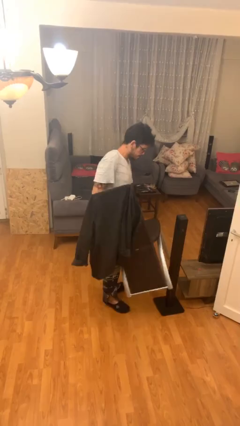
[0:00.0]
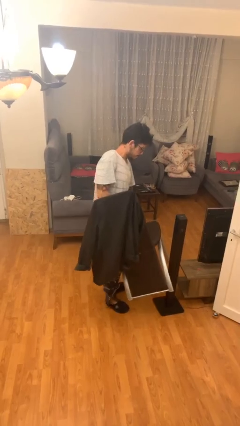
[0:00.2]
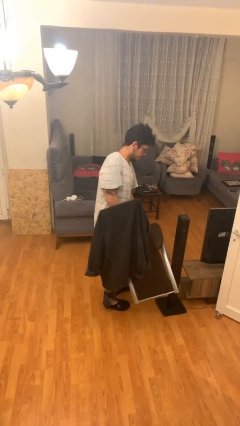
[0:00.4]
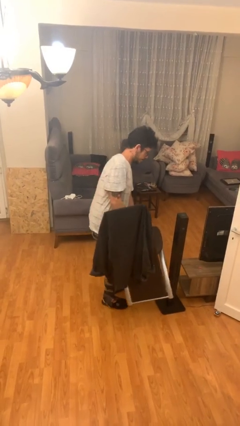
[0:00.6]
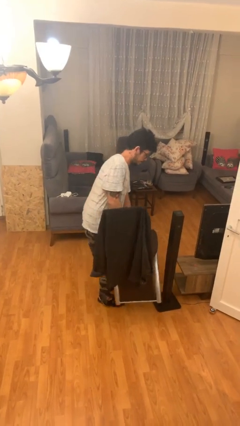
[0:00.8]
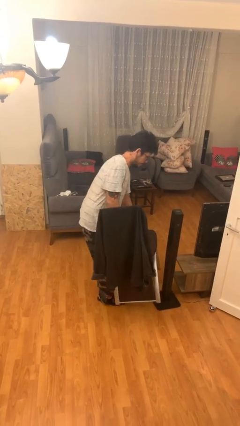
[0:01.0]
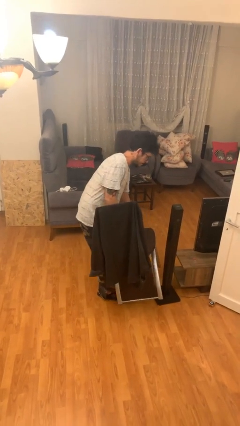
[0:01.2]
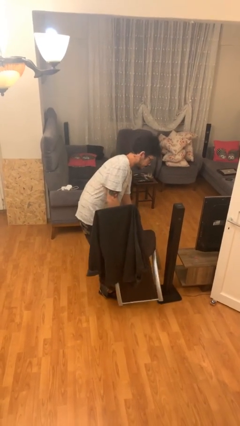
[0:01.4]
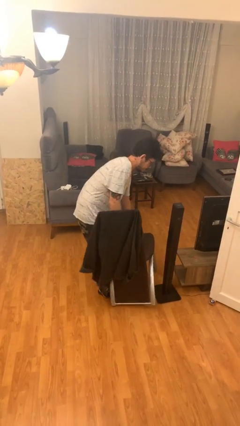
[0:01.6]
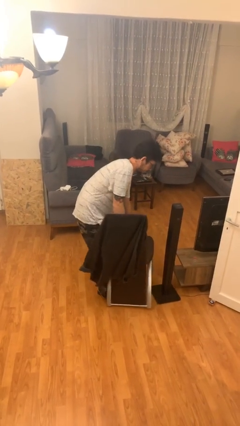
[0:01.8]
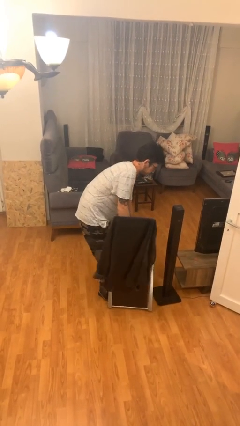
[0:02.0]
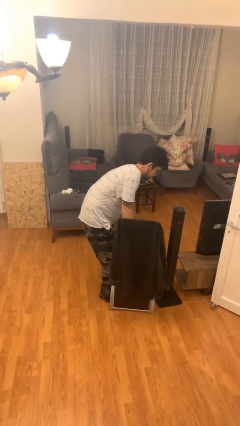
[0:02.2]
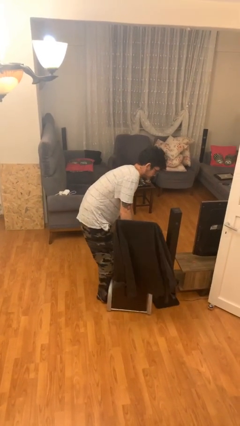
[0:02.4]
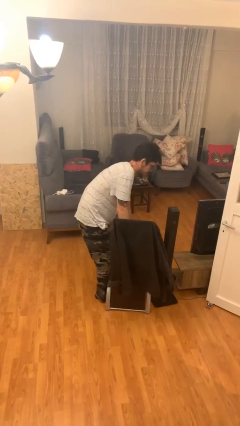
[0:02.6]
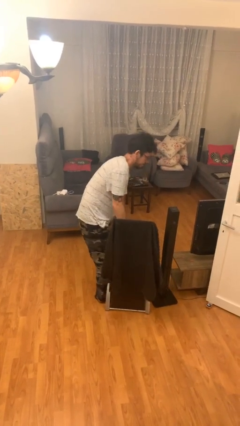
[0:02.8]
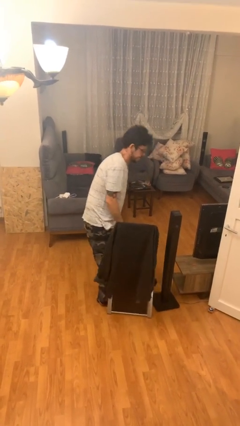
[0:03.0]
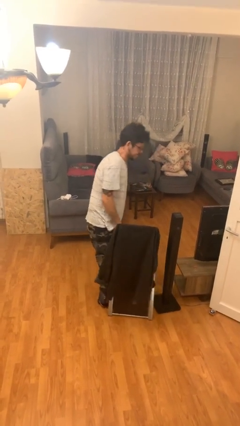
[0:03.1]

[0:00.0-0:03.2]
person puts down object on floor

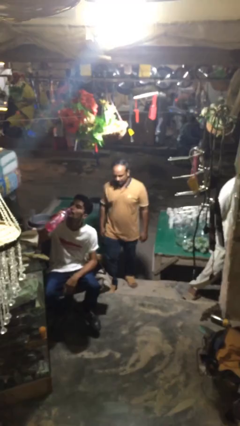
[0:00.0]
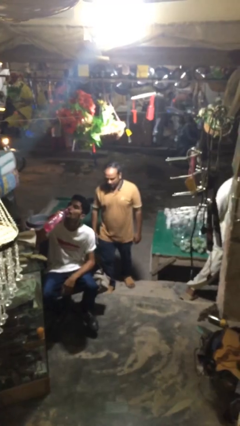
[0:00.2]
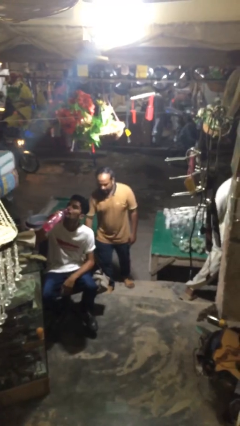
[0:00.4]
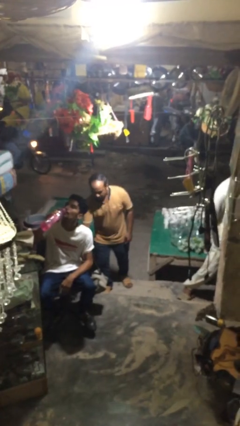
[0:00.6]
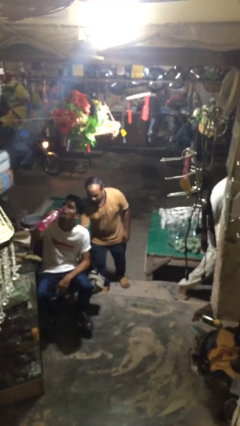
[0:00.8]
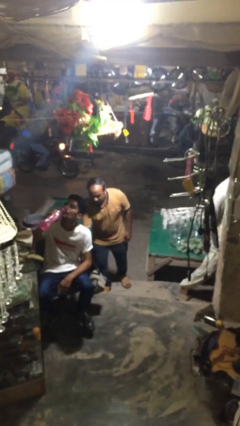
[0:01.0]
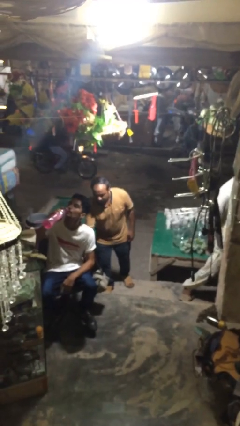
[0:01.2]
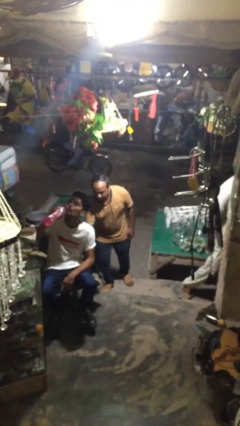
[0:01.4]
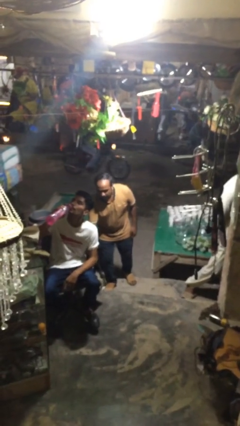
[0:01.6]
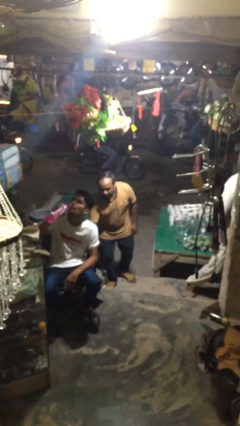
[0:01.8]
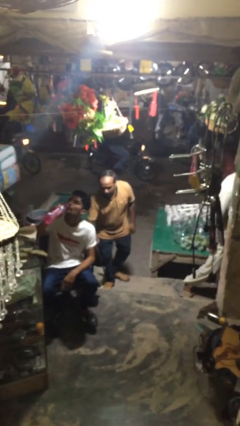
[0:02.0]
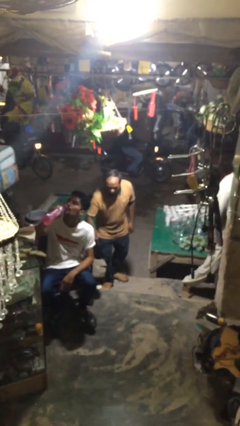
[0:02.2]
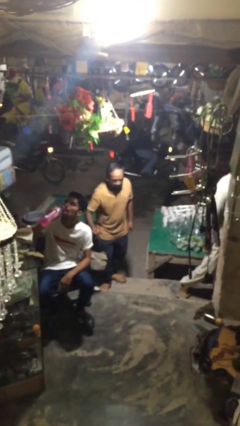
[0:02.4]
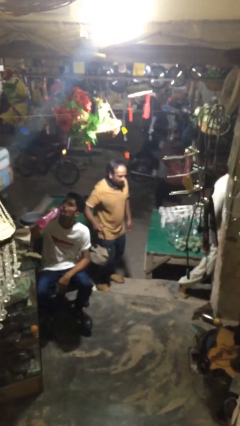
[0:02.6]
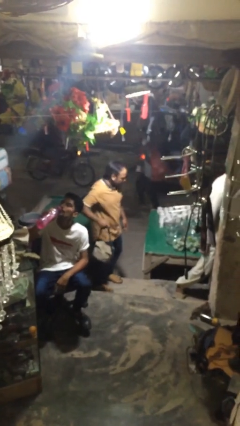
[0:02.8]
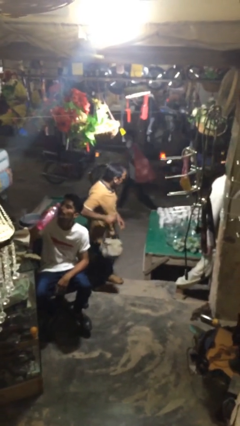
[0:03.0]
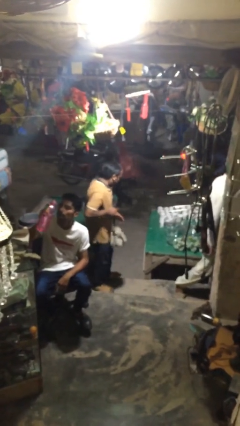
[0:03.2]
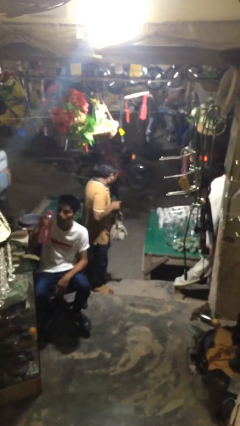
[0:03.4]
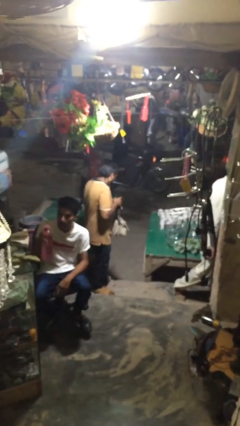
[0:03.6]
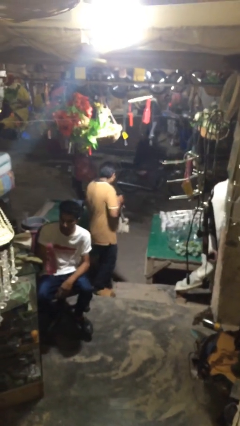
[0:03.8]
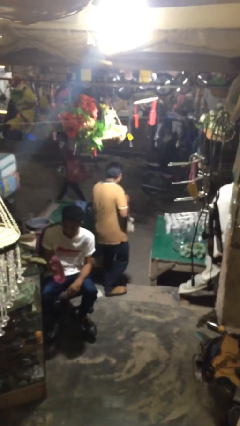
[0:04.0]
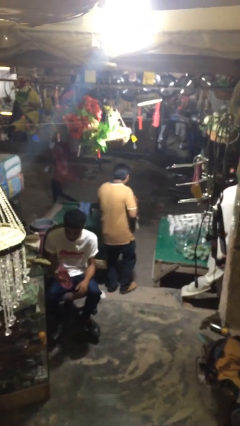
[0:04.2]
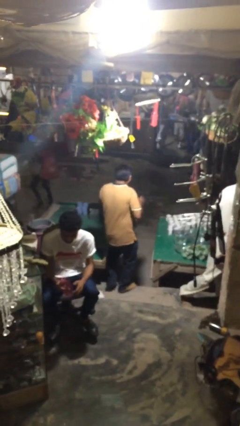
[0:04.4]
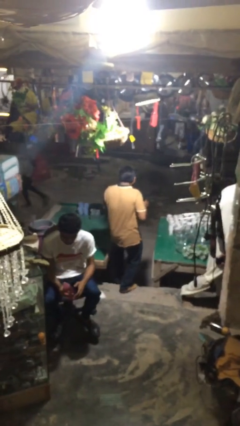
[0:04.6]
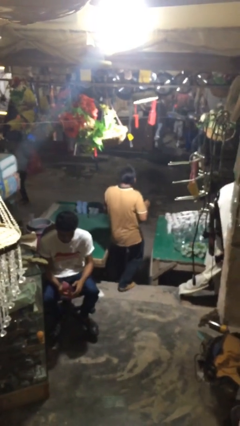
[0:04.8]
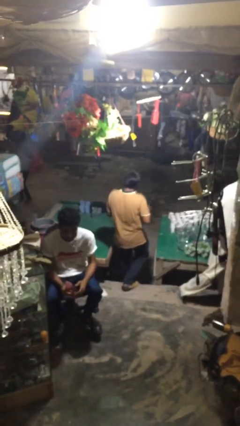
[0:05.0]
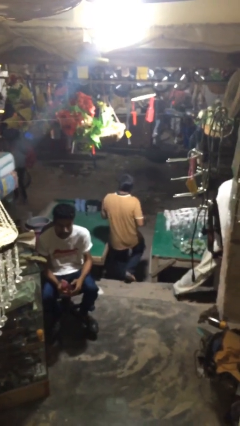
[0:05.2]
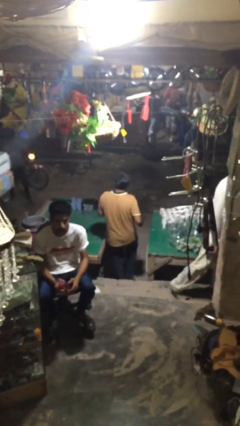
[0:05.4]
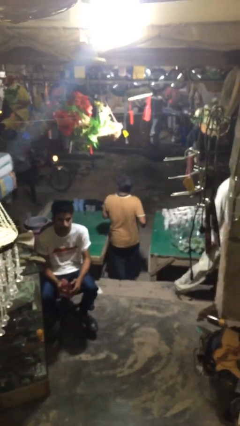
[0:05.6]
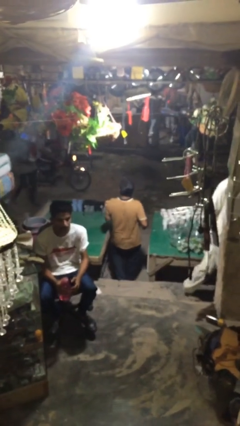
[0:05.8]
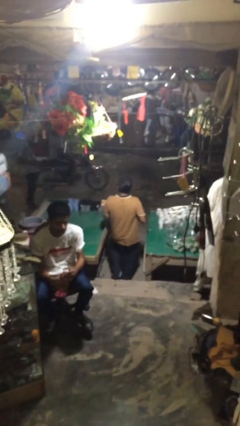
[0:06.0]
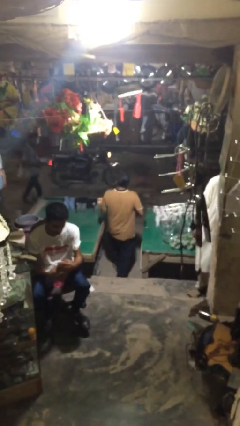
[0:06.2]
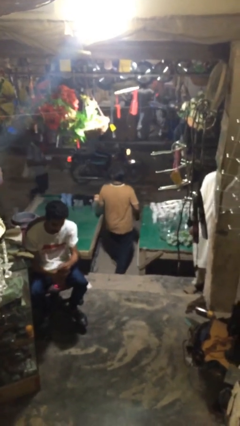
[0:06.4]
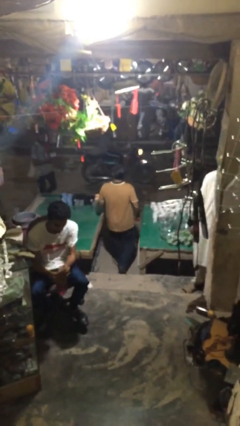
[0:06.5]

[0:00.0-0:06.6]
person steals object from person

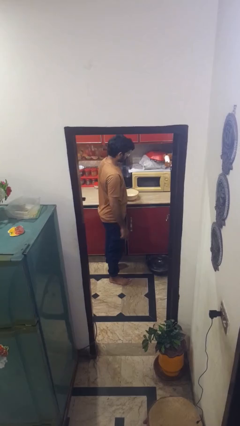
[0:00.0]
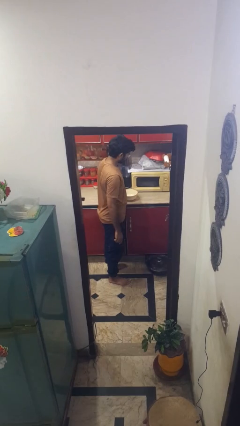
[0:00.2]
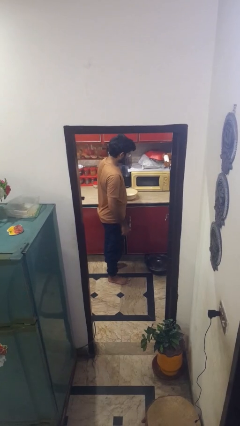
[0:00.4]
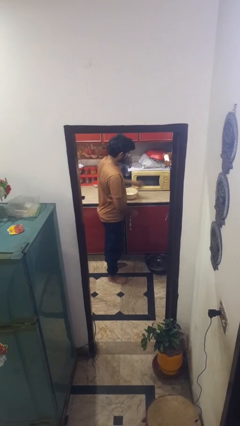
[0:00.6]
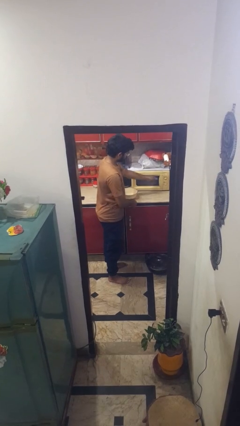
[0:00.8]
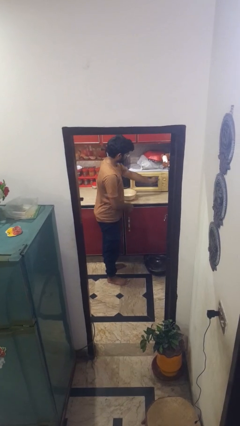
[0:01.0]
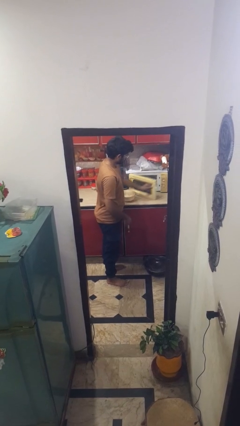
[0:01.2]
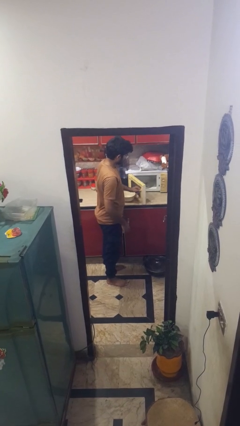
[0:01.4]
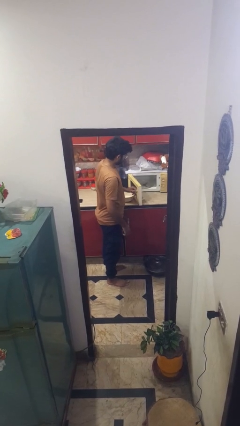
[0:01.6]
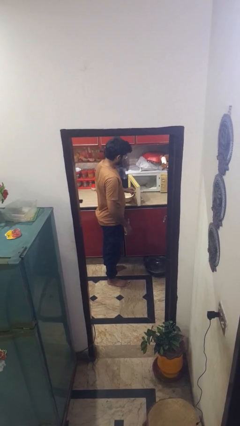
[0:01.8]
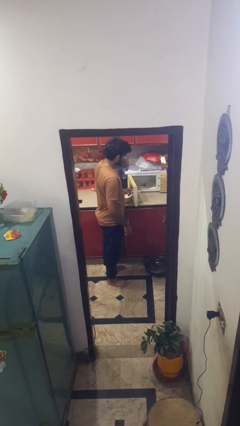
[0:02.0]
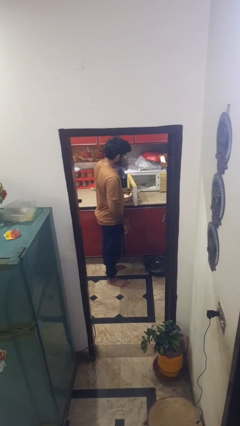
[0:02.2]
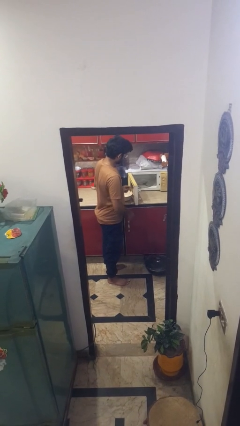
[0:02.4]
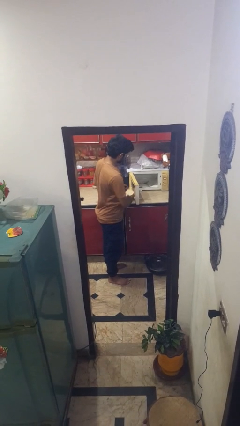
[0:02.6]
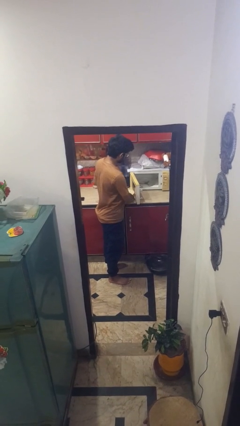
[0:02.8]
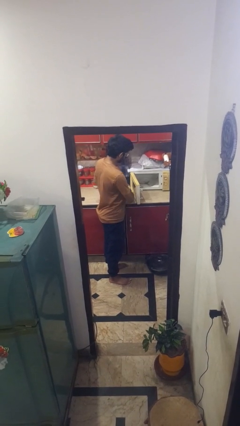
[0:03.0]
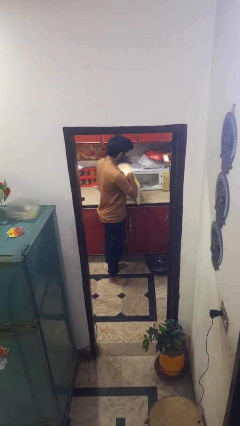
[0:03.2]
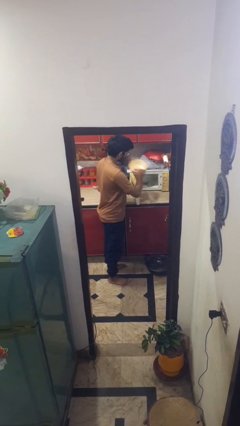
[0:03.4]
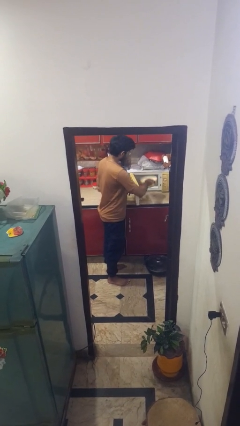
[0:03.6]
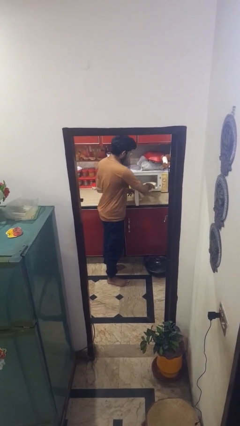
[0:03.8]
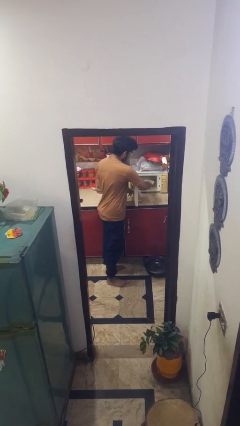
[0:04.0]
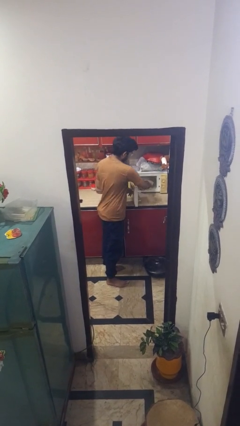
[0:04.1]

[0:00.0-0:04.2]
person opens microwave

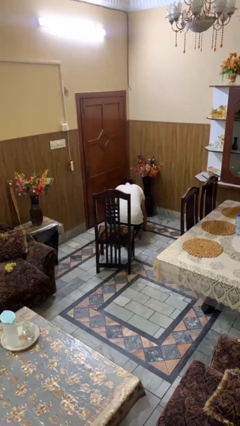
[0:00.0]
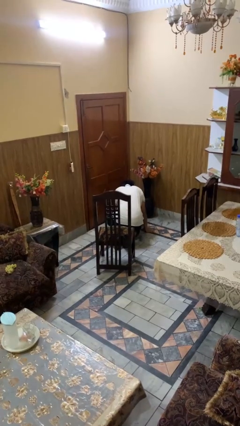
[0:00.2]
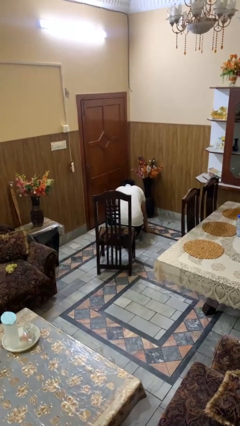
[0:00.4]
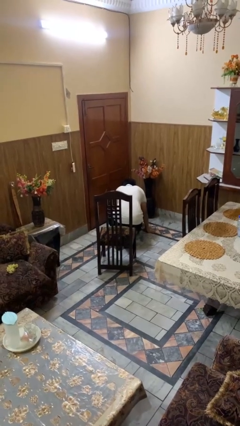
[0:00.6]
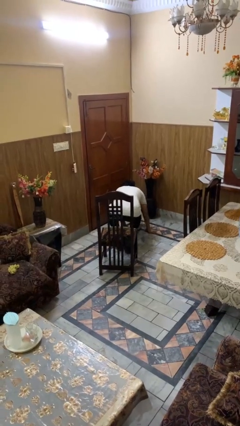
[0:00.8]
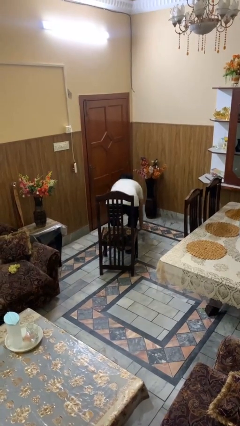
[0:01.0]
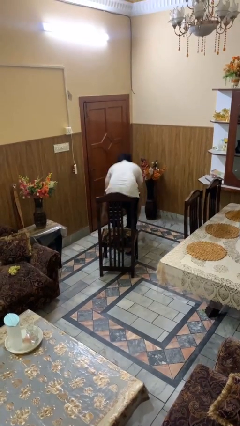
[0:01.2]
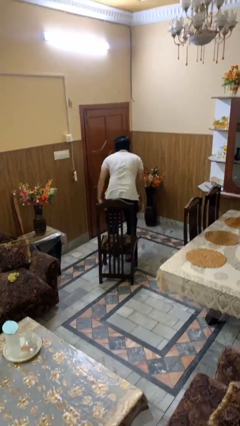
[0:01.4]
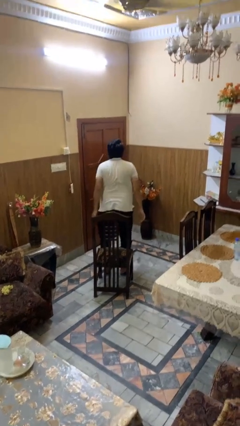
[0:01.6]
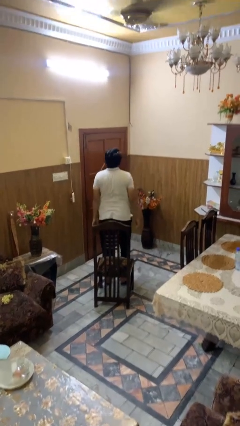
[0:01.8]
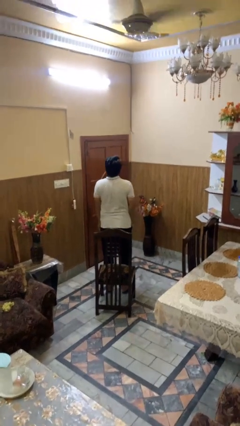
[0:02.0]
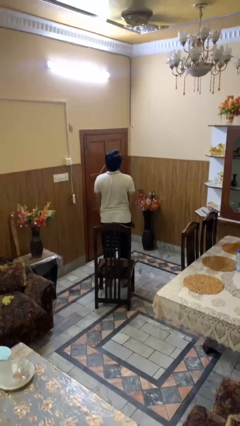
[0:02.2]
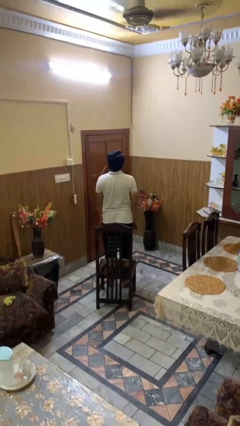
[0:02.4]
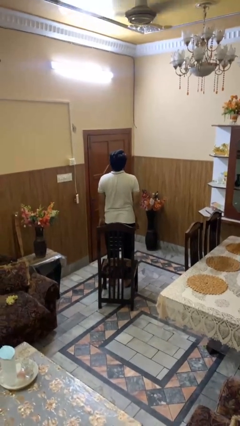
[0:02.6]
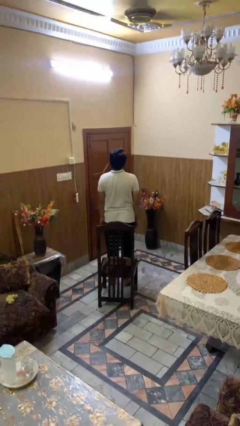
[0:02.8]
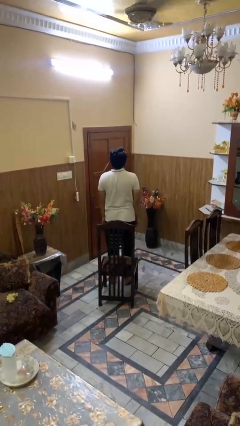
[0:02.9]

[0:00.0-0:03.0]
person stands up from floor

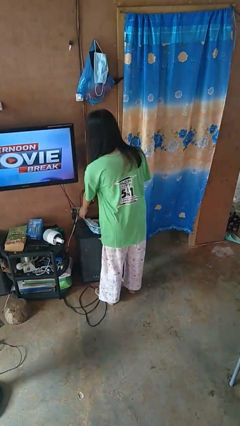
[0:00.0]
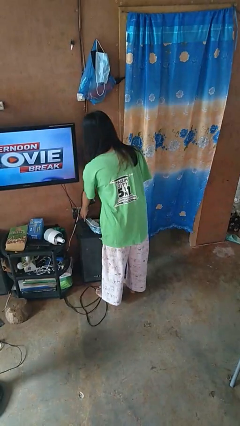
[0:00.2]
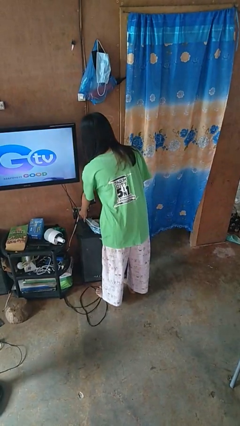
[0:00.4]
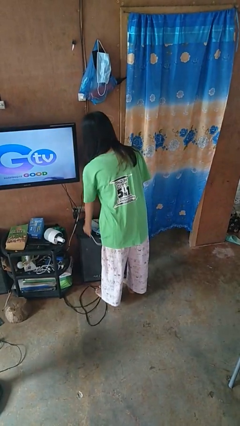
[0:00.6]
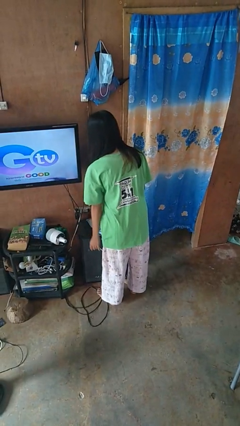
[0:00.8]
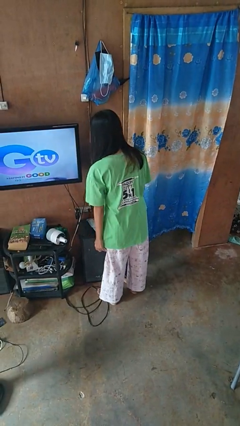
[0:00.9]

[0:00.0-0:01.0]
person unplugs from electrical socket
